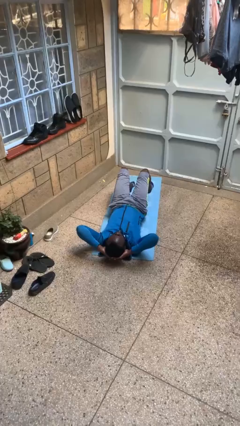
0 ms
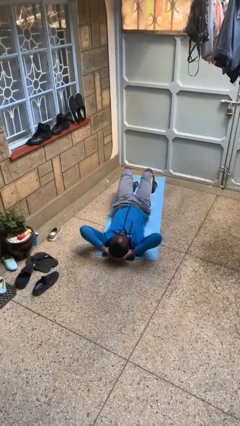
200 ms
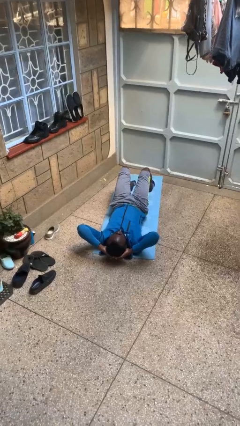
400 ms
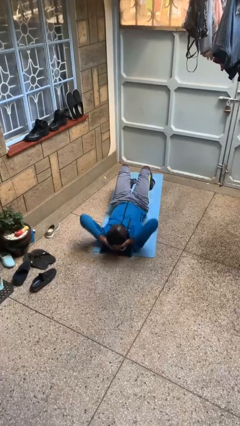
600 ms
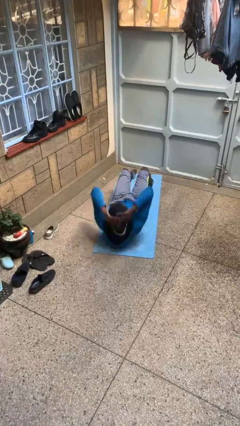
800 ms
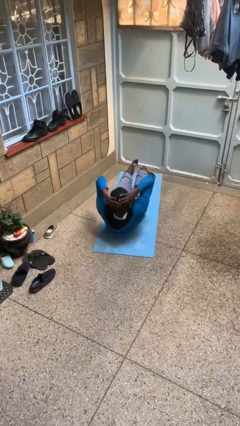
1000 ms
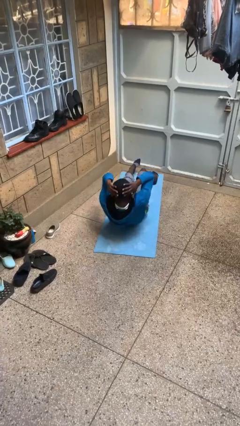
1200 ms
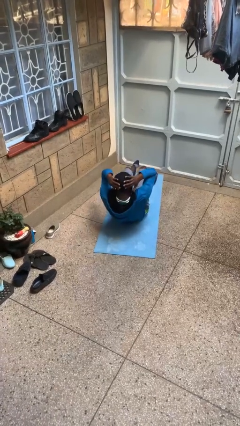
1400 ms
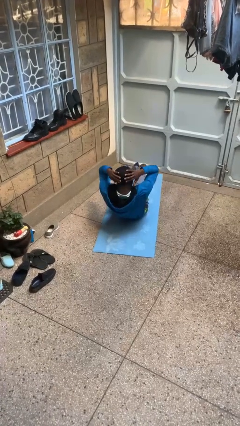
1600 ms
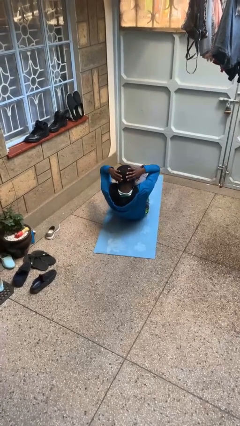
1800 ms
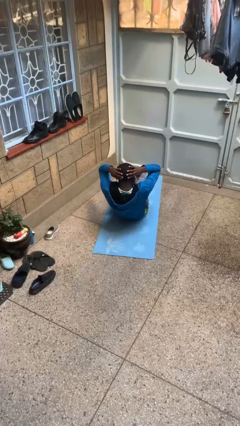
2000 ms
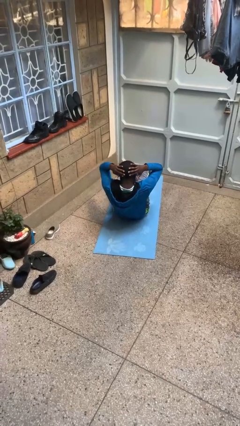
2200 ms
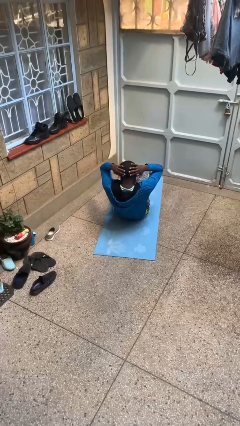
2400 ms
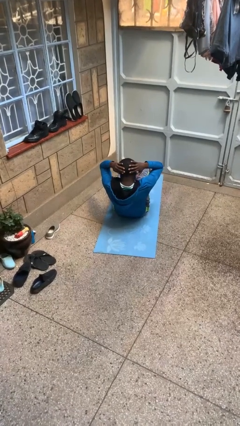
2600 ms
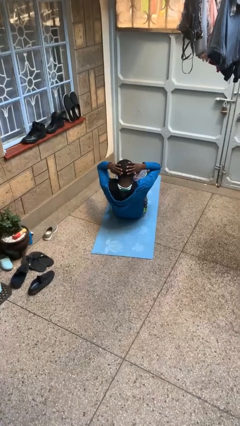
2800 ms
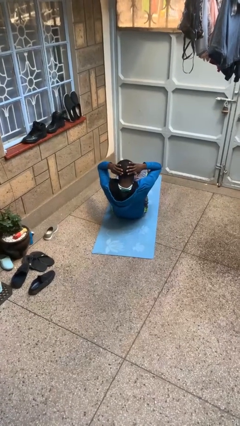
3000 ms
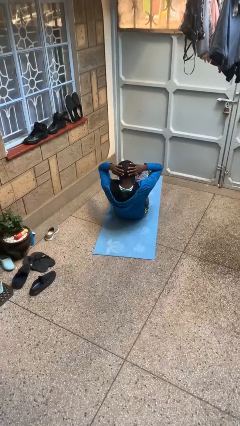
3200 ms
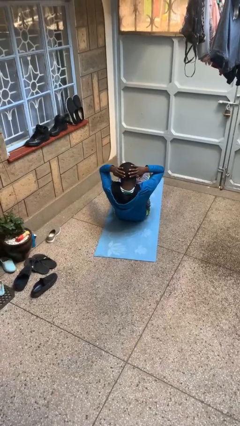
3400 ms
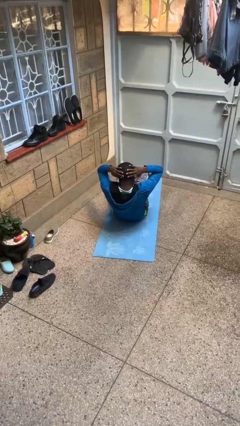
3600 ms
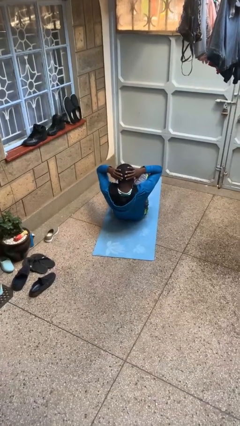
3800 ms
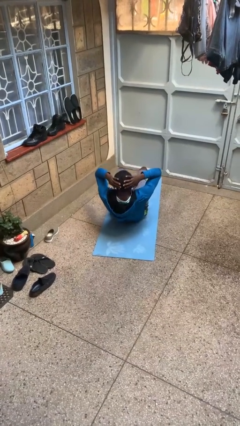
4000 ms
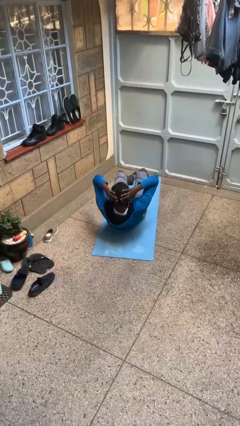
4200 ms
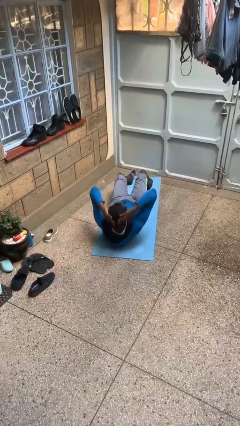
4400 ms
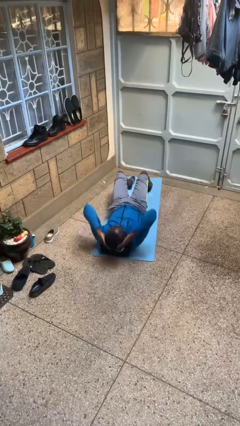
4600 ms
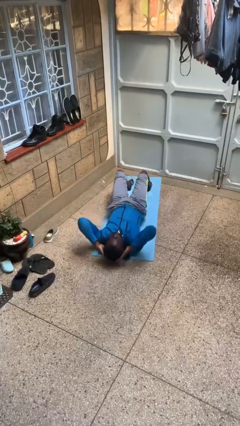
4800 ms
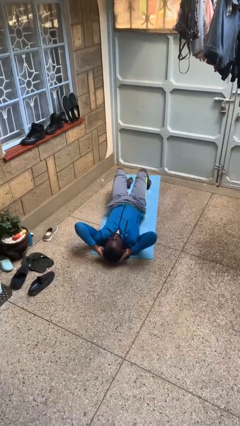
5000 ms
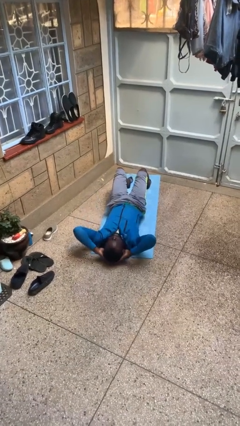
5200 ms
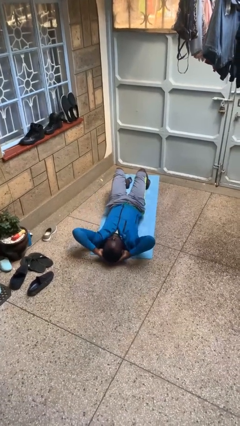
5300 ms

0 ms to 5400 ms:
person exercises with situp

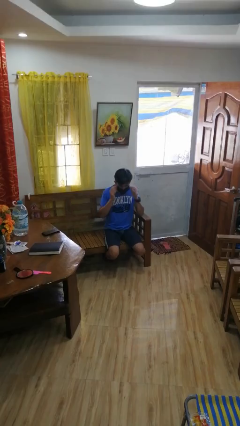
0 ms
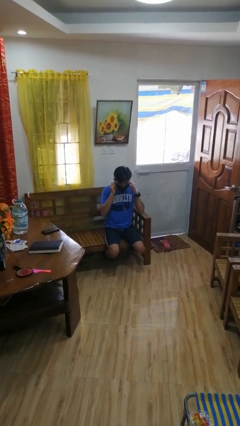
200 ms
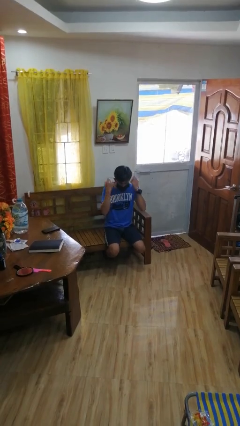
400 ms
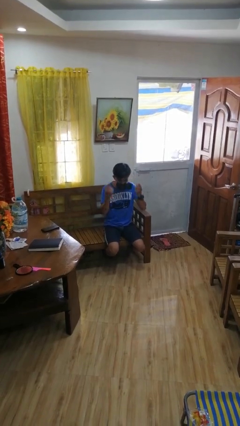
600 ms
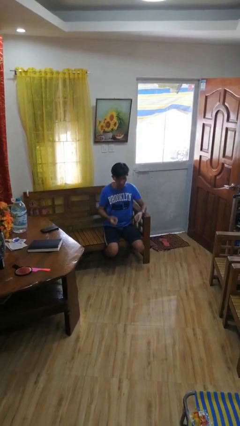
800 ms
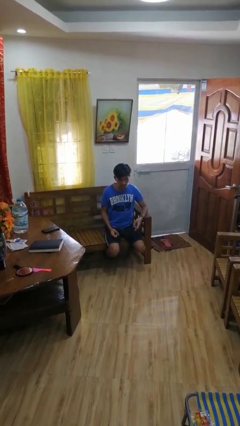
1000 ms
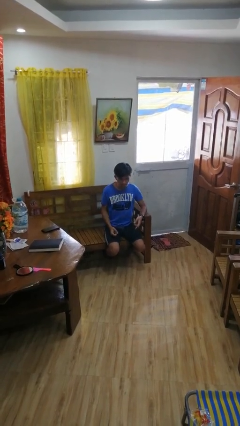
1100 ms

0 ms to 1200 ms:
person takes off facemask

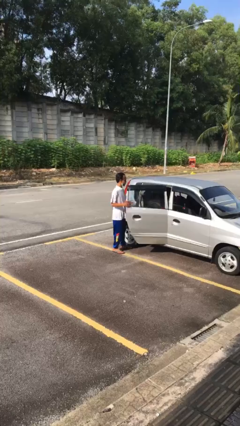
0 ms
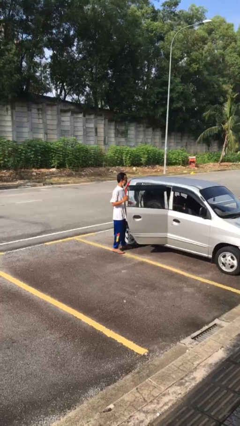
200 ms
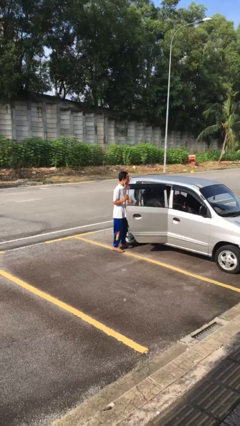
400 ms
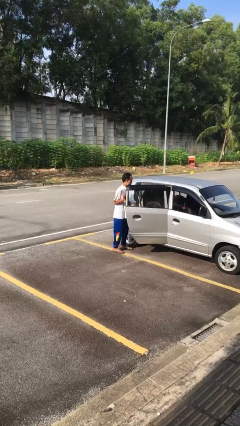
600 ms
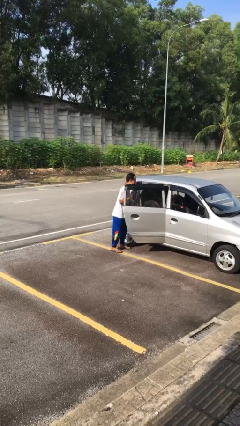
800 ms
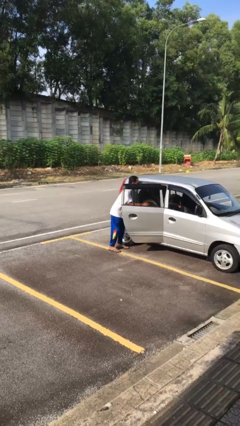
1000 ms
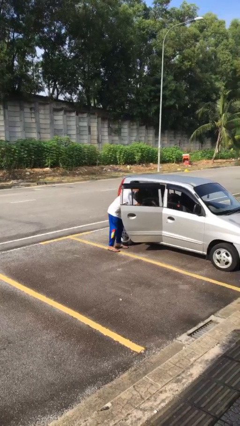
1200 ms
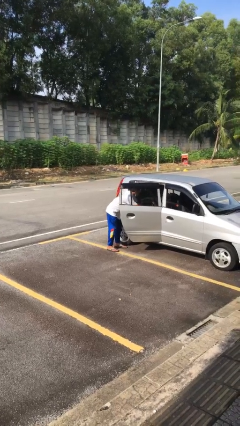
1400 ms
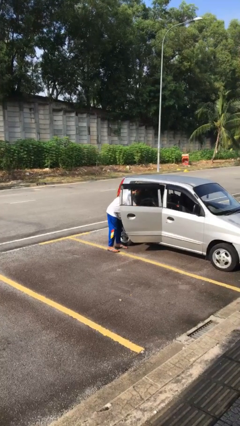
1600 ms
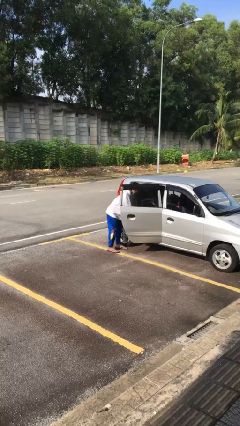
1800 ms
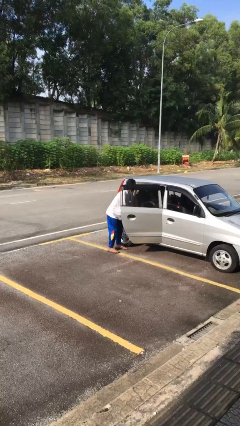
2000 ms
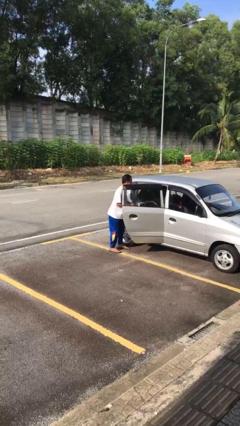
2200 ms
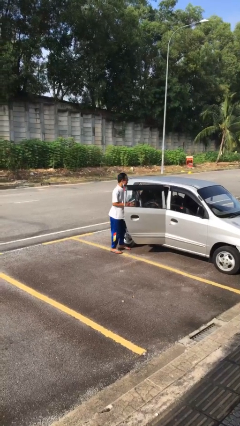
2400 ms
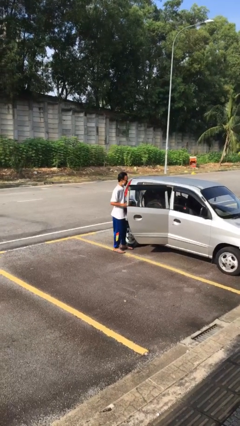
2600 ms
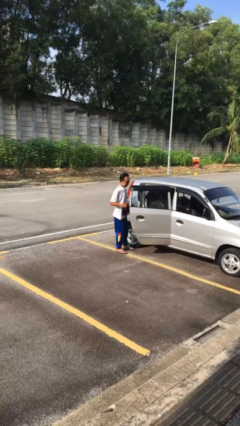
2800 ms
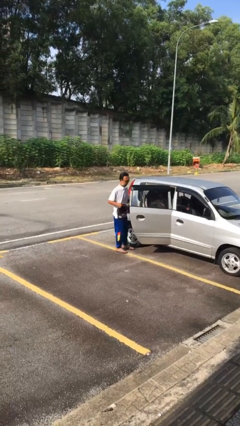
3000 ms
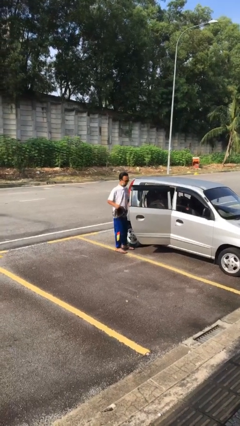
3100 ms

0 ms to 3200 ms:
person unloads car

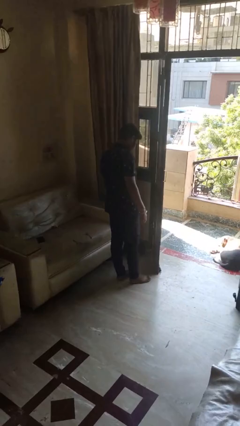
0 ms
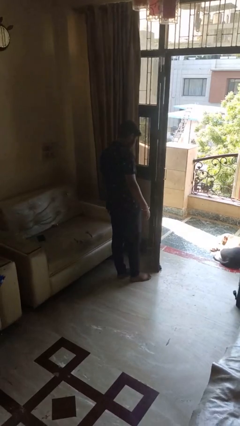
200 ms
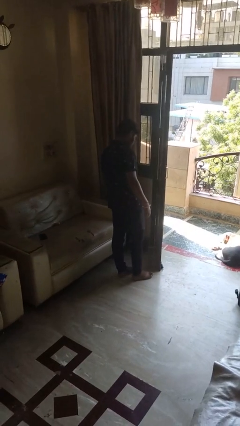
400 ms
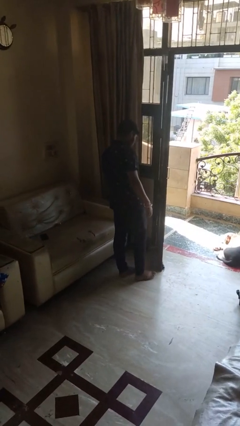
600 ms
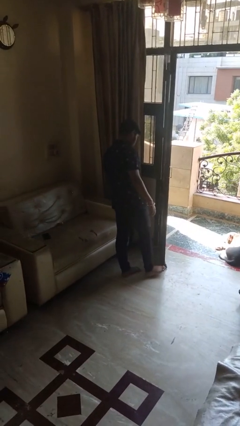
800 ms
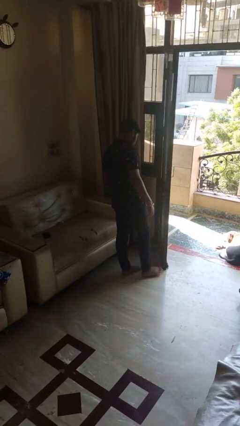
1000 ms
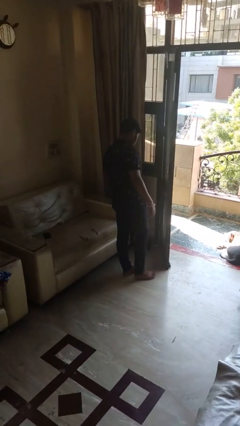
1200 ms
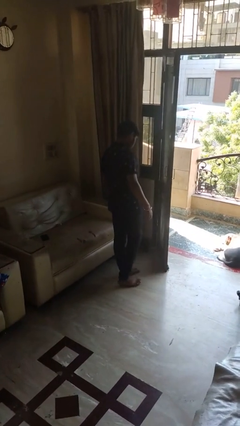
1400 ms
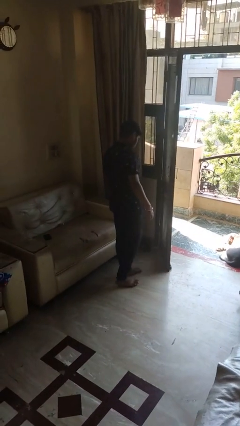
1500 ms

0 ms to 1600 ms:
person stubs toe

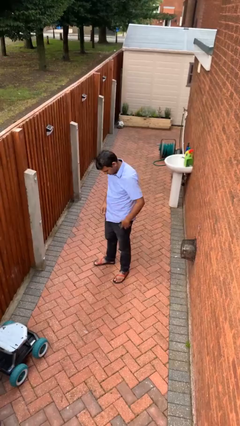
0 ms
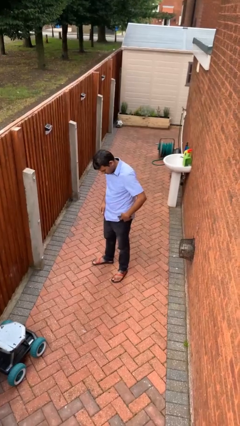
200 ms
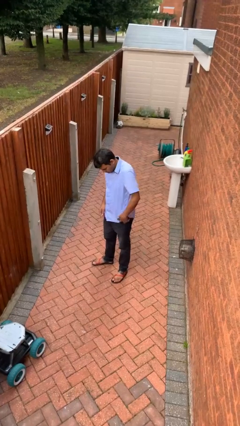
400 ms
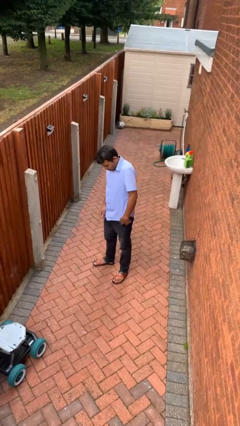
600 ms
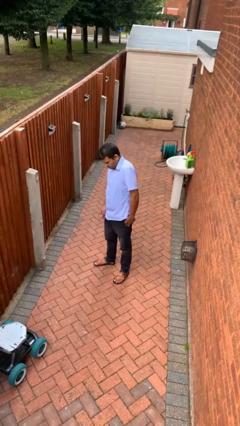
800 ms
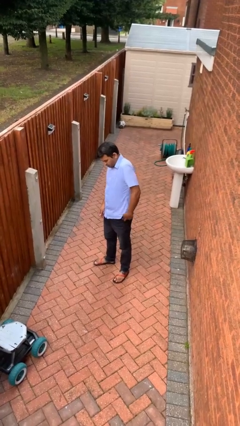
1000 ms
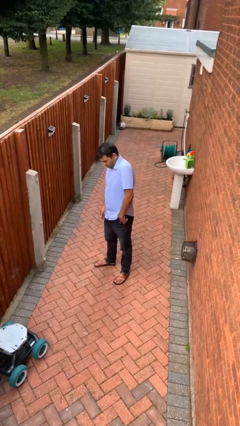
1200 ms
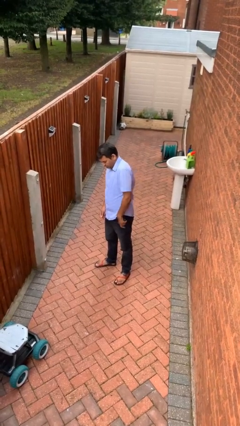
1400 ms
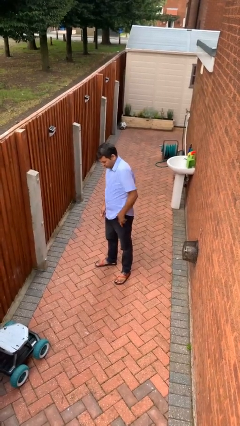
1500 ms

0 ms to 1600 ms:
person puts phone into pocket

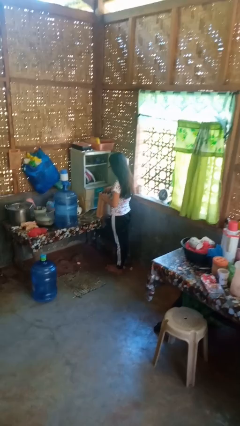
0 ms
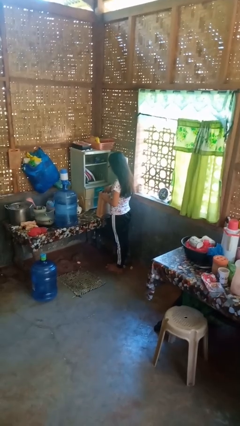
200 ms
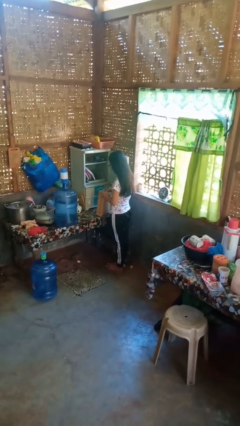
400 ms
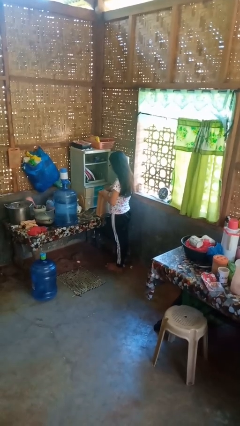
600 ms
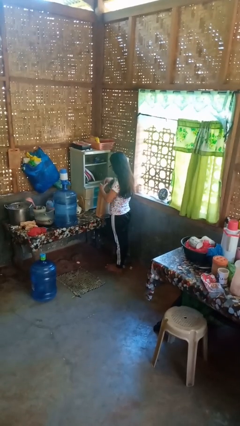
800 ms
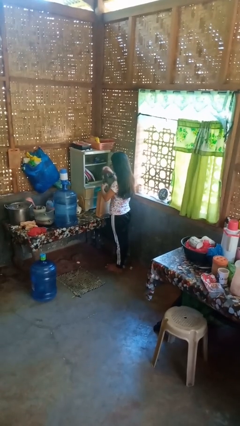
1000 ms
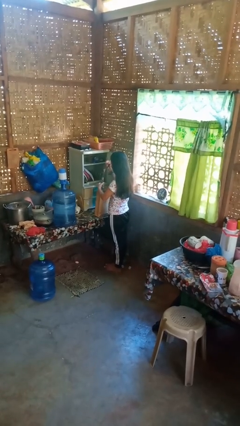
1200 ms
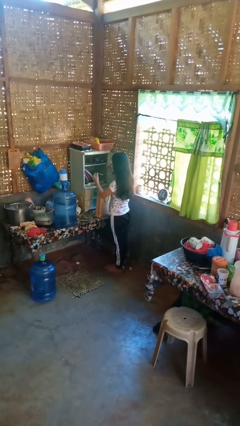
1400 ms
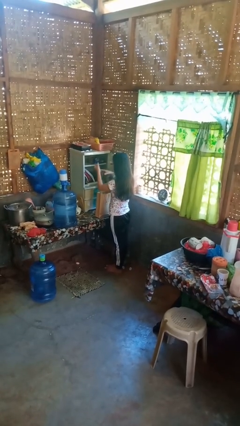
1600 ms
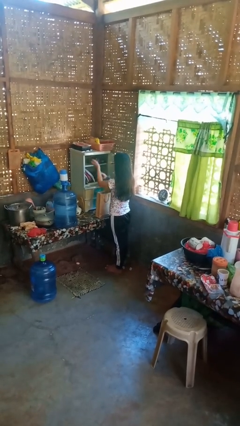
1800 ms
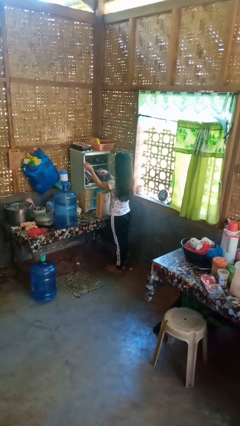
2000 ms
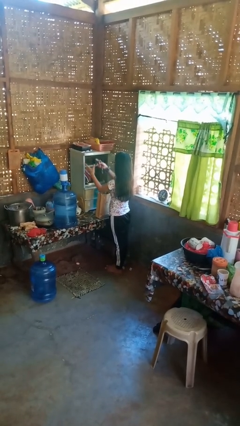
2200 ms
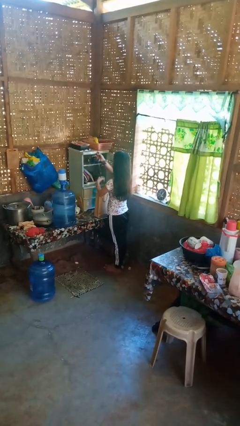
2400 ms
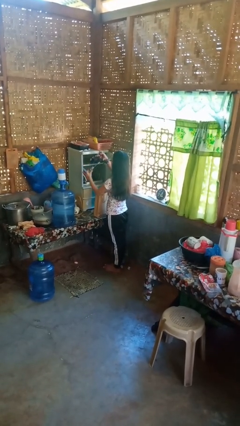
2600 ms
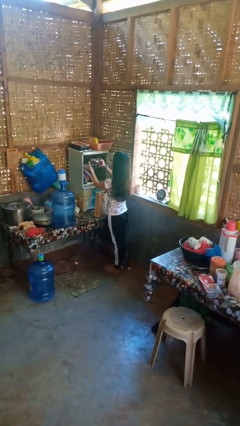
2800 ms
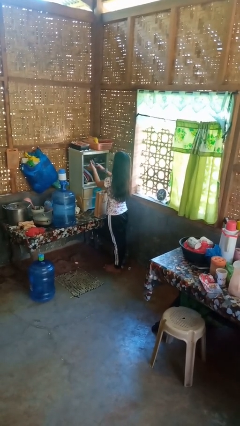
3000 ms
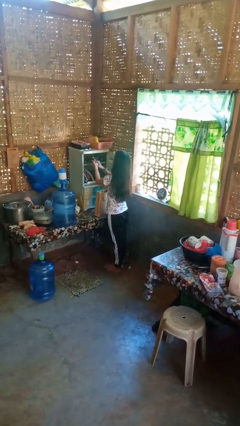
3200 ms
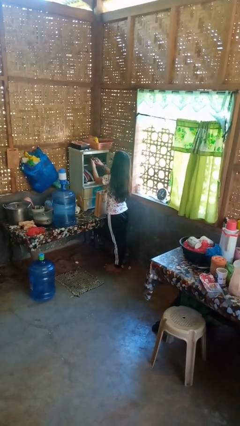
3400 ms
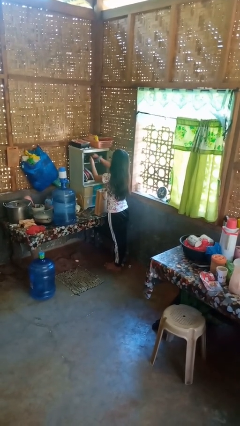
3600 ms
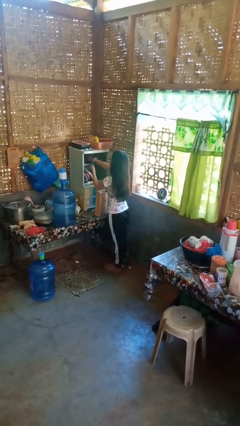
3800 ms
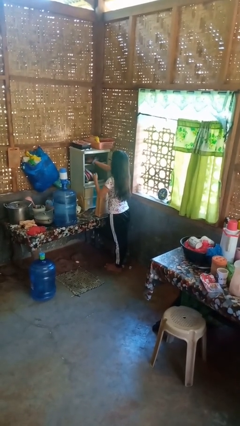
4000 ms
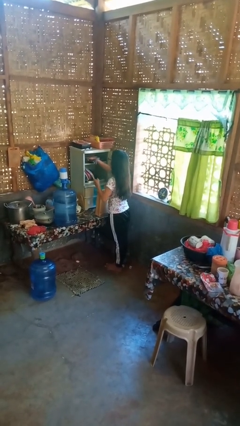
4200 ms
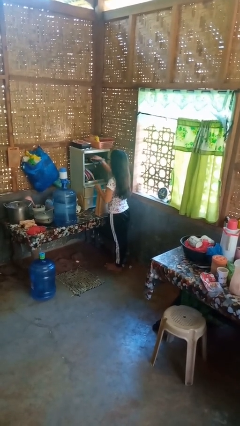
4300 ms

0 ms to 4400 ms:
person loads groceries into cabinet
